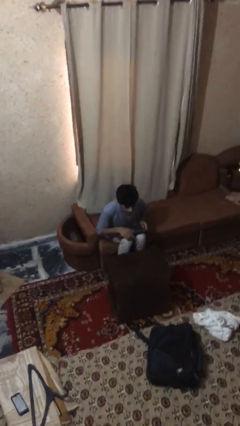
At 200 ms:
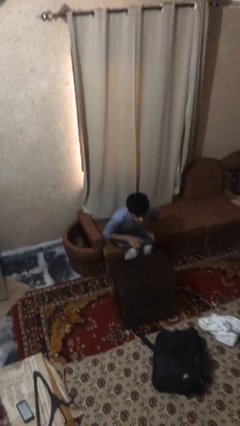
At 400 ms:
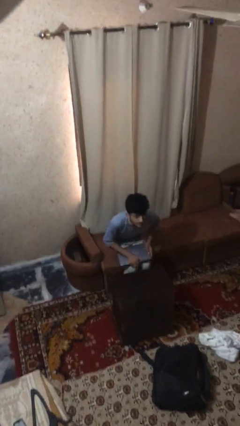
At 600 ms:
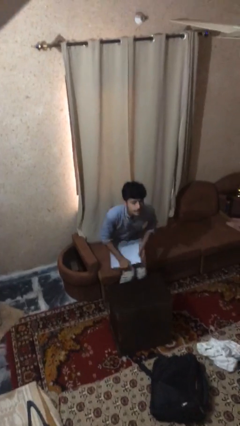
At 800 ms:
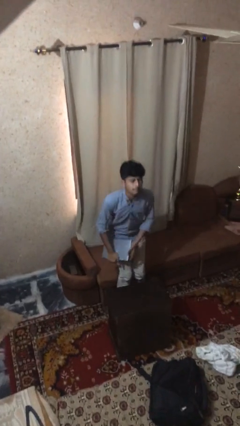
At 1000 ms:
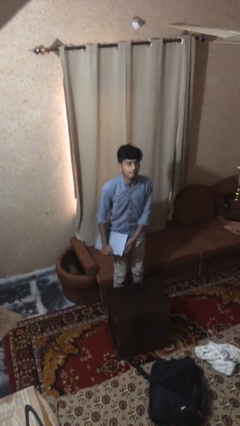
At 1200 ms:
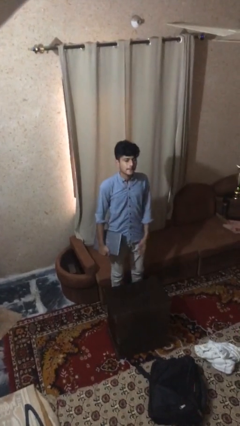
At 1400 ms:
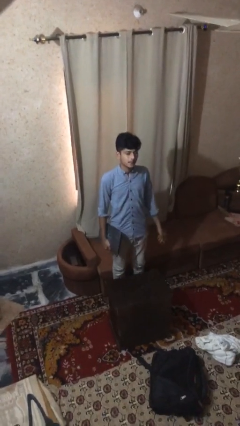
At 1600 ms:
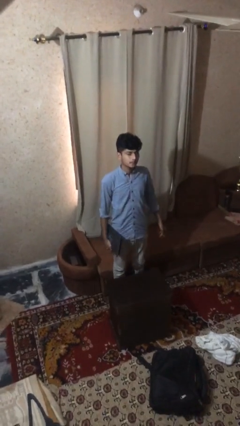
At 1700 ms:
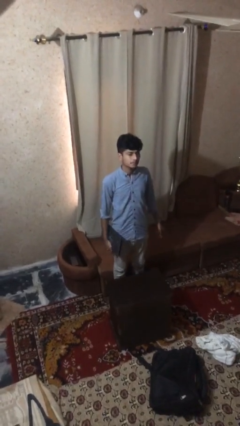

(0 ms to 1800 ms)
person stands up

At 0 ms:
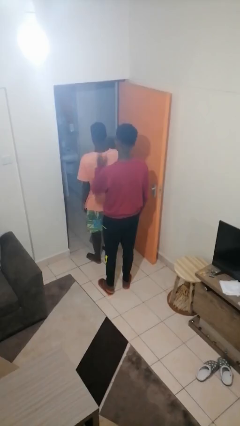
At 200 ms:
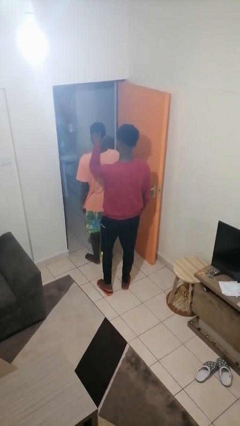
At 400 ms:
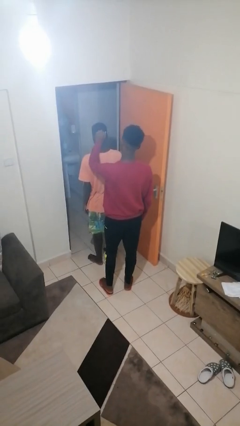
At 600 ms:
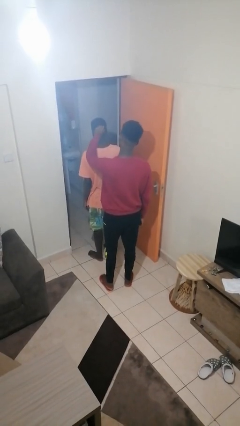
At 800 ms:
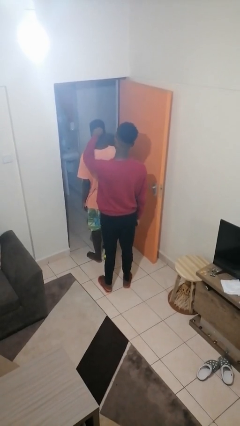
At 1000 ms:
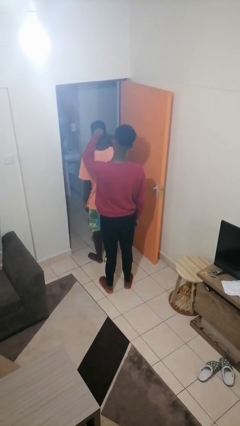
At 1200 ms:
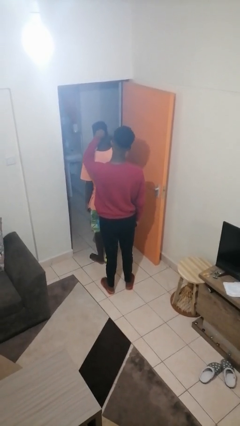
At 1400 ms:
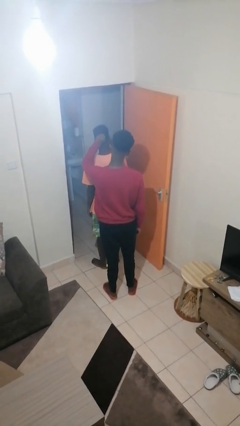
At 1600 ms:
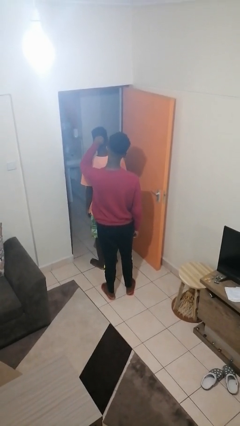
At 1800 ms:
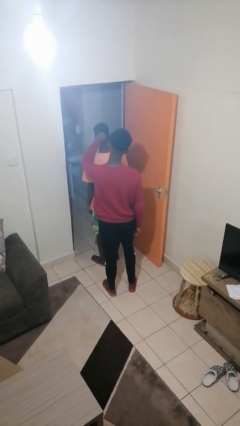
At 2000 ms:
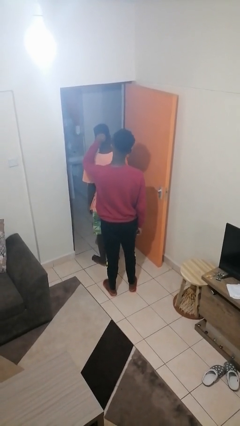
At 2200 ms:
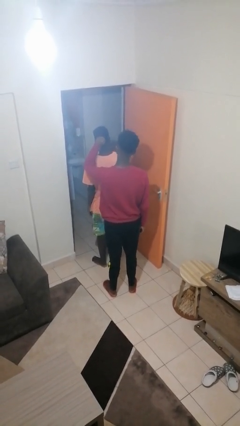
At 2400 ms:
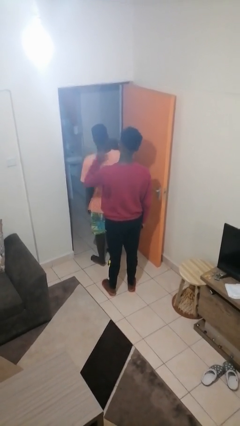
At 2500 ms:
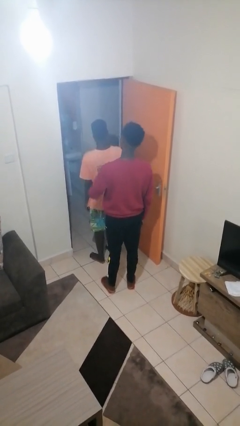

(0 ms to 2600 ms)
person grabs person by hair

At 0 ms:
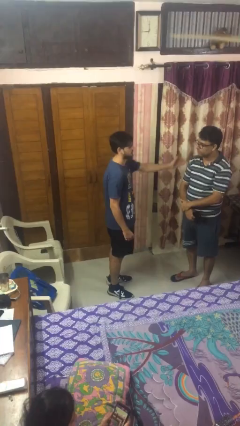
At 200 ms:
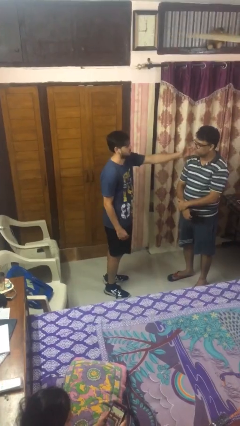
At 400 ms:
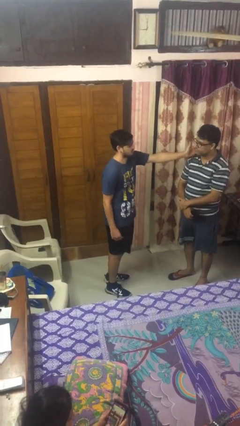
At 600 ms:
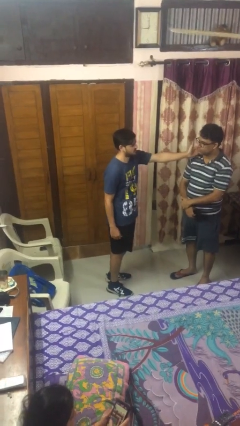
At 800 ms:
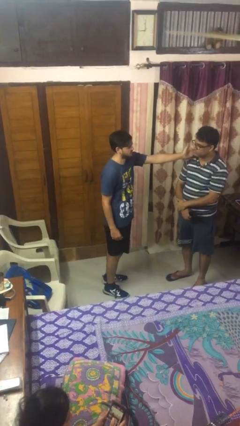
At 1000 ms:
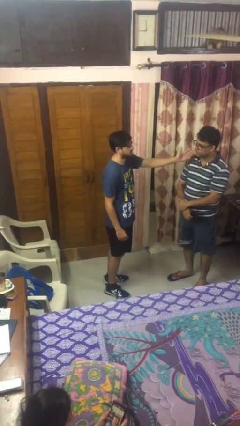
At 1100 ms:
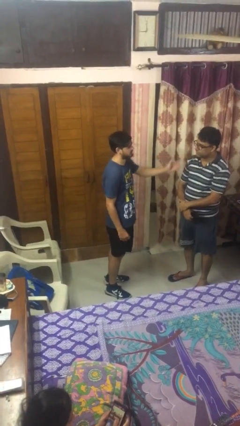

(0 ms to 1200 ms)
person touches face of person

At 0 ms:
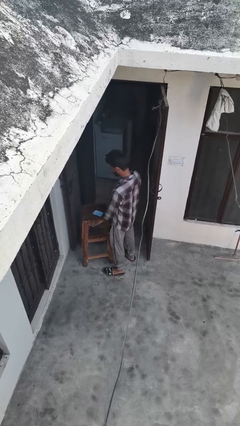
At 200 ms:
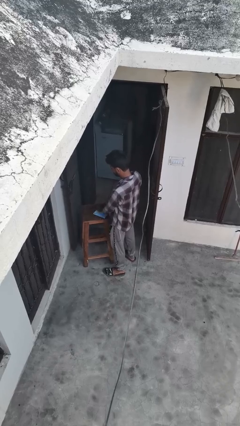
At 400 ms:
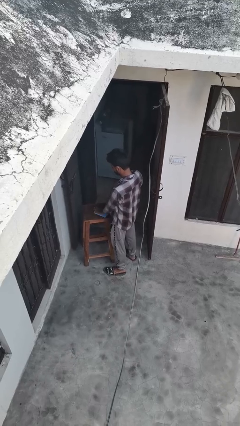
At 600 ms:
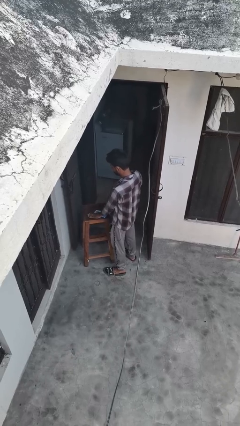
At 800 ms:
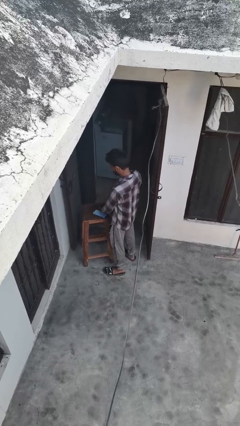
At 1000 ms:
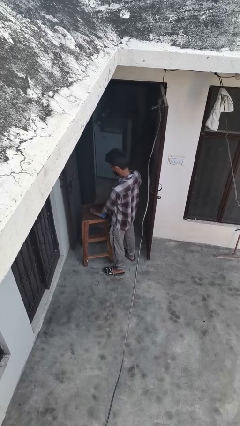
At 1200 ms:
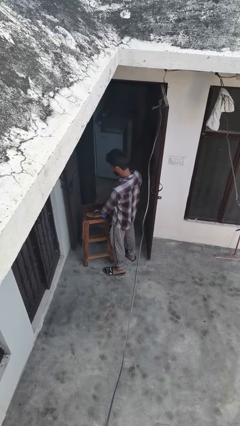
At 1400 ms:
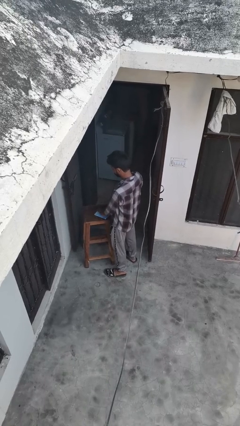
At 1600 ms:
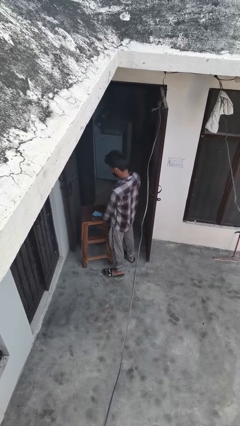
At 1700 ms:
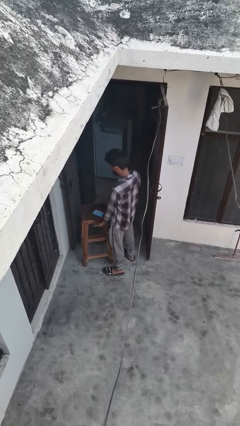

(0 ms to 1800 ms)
person waves hand over object

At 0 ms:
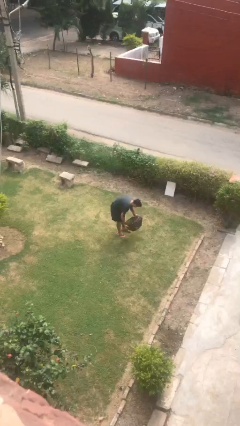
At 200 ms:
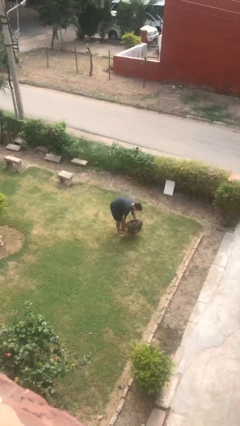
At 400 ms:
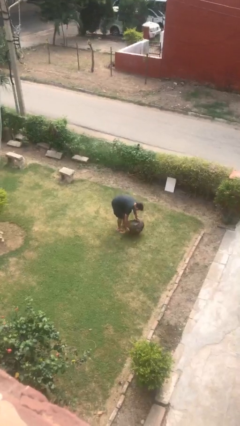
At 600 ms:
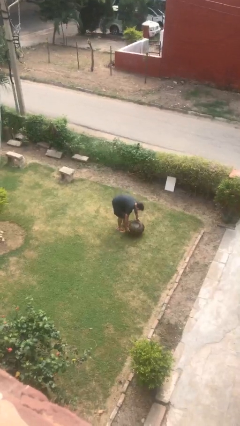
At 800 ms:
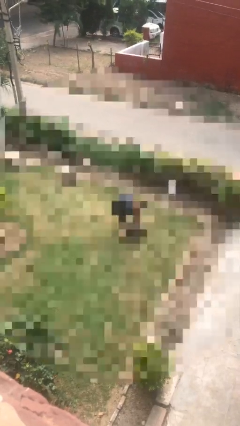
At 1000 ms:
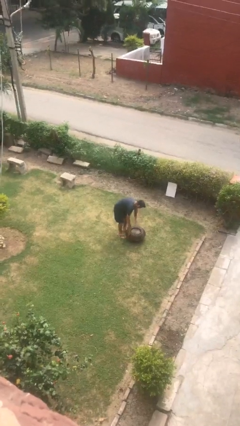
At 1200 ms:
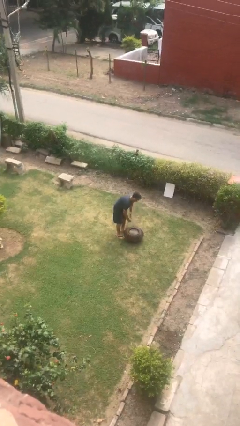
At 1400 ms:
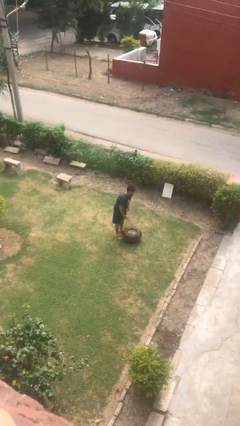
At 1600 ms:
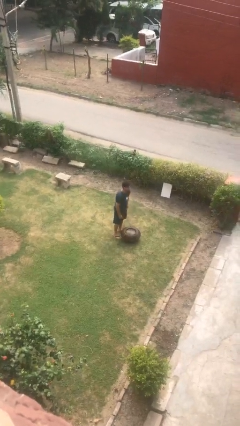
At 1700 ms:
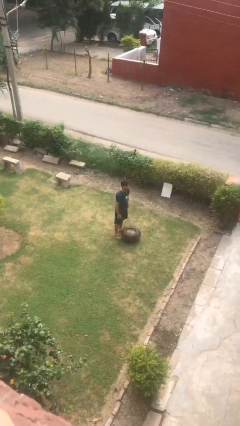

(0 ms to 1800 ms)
person puts down object on floor

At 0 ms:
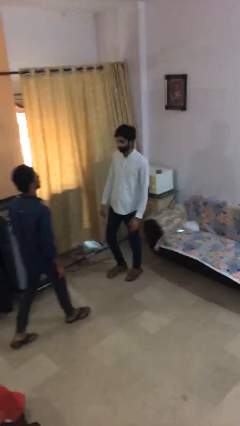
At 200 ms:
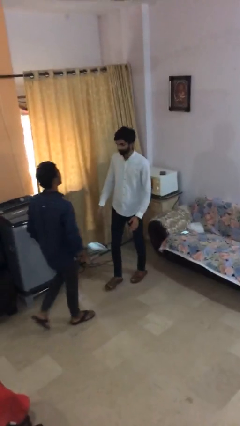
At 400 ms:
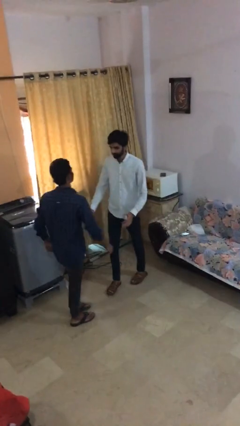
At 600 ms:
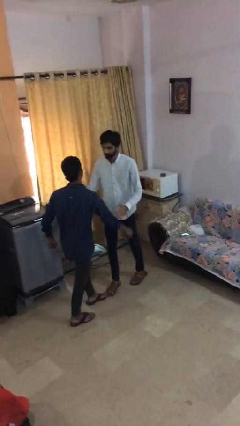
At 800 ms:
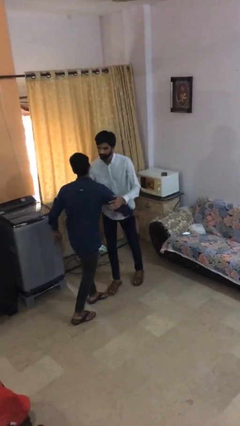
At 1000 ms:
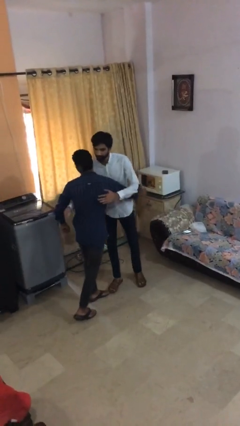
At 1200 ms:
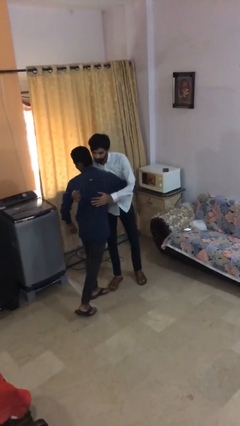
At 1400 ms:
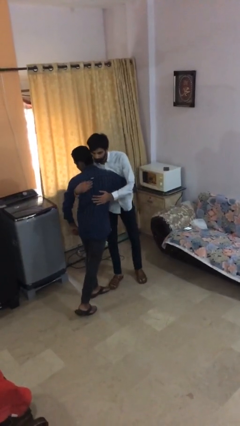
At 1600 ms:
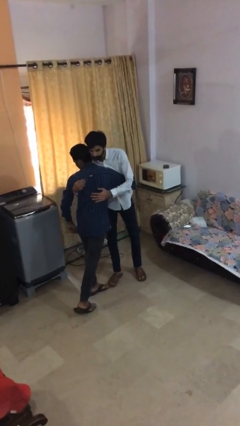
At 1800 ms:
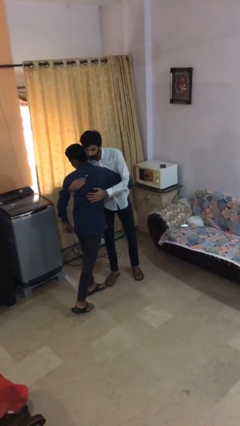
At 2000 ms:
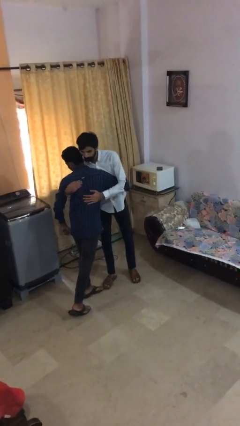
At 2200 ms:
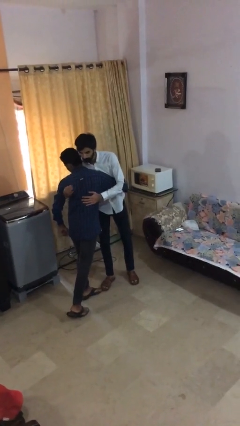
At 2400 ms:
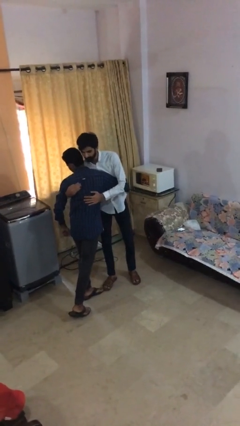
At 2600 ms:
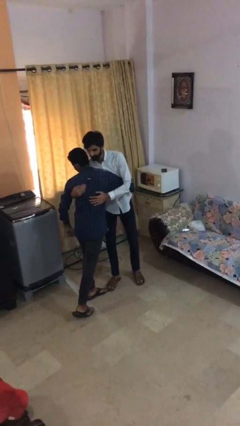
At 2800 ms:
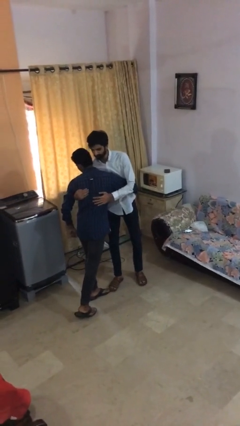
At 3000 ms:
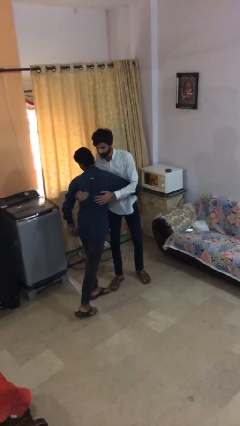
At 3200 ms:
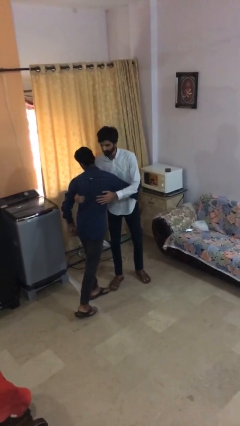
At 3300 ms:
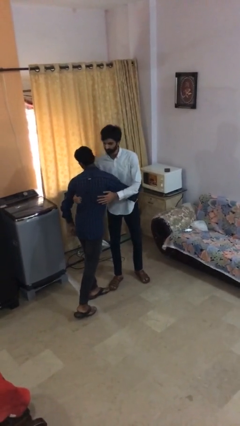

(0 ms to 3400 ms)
person embraces person

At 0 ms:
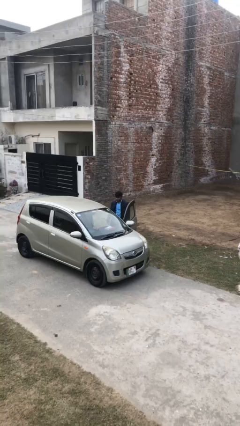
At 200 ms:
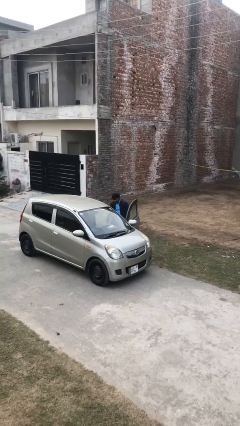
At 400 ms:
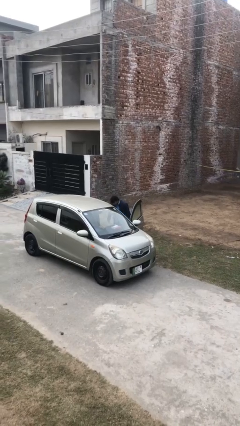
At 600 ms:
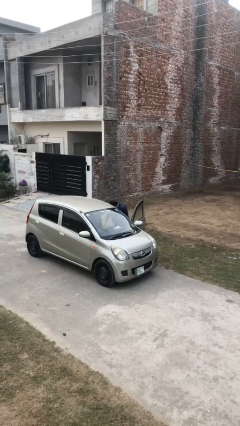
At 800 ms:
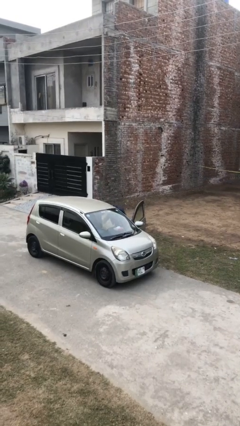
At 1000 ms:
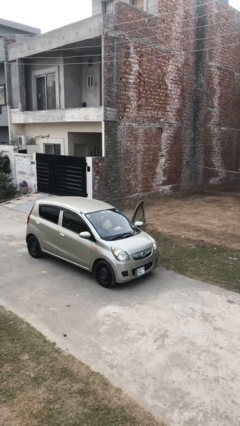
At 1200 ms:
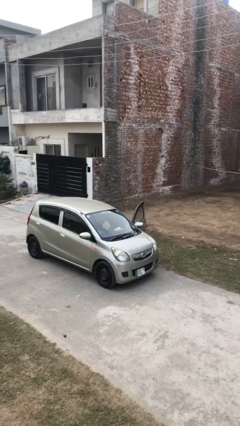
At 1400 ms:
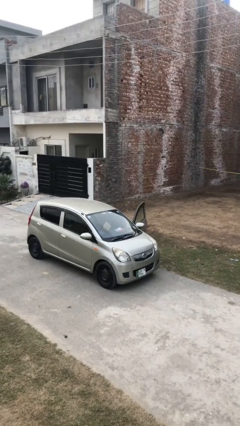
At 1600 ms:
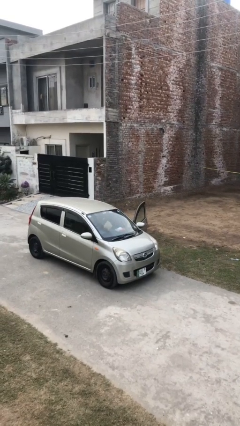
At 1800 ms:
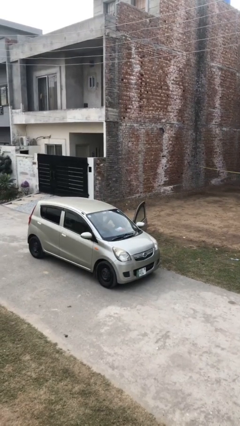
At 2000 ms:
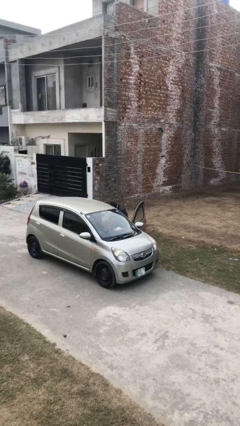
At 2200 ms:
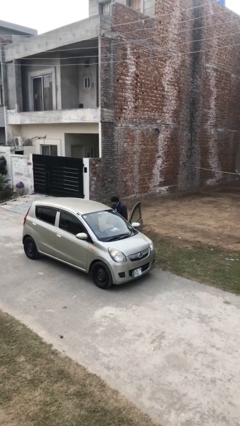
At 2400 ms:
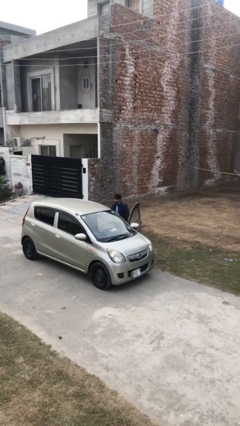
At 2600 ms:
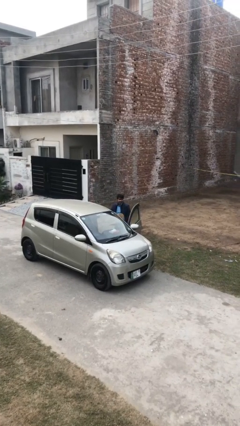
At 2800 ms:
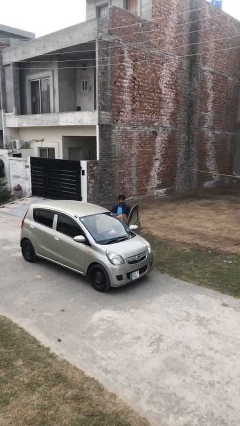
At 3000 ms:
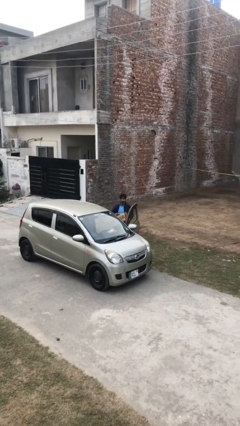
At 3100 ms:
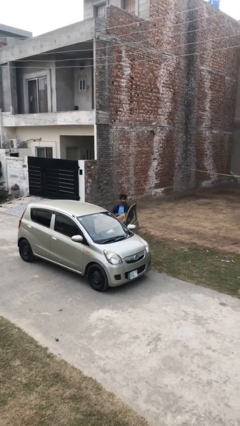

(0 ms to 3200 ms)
person unloads car

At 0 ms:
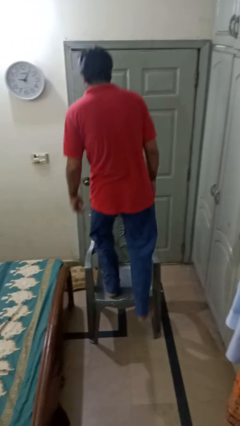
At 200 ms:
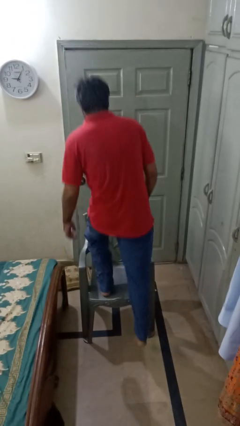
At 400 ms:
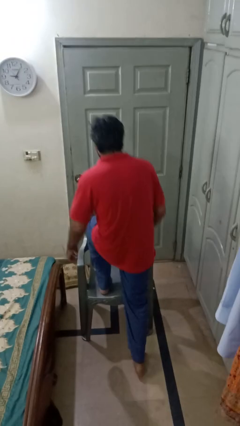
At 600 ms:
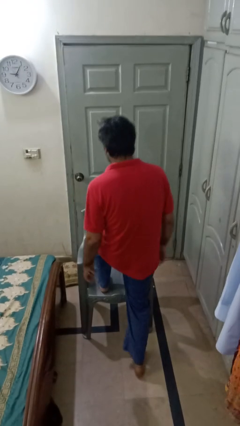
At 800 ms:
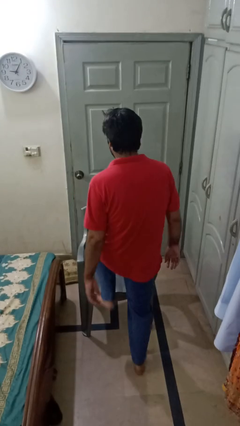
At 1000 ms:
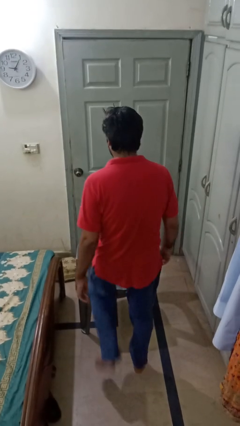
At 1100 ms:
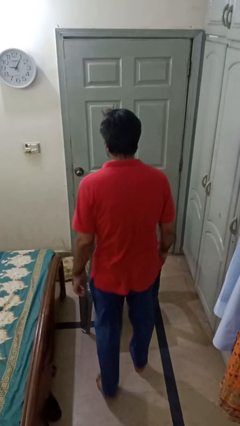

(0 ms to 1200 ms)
person climbs off chair
